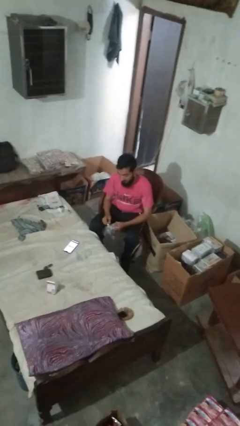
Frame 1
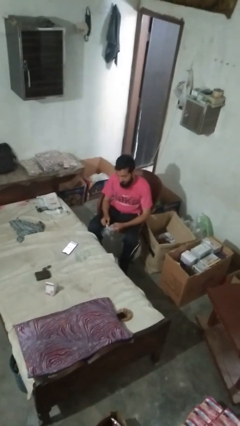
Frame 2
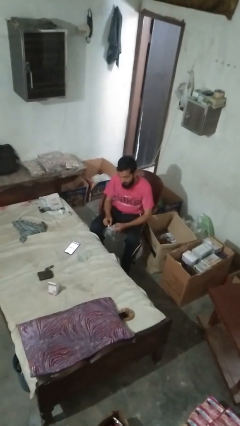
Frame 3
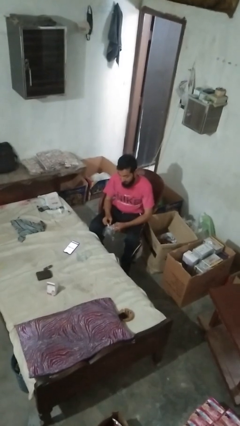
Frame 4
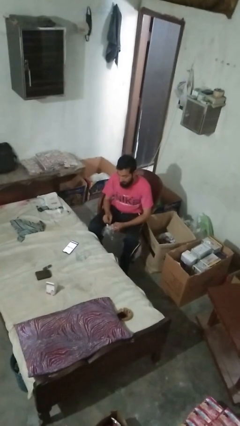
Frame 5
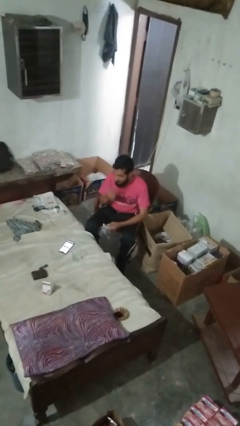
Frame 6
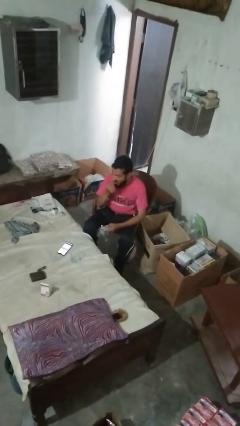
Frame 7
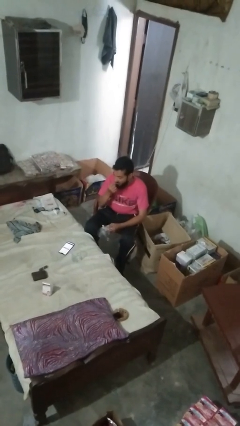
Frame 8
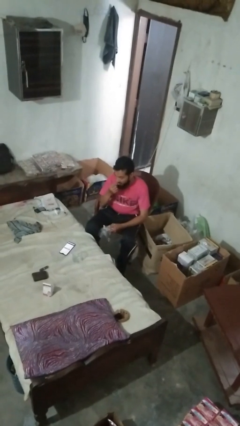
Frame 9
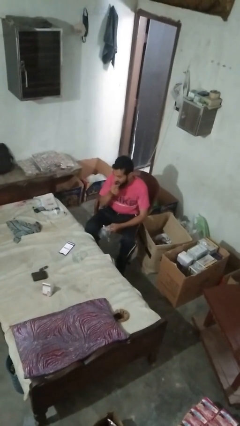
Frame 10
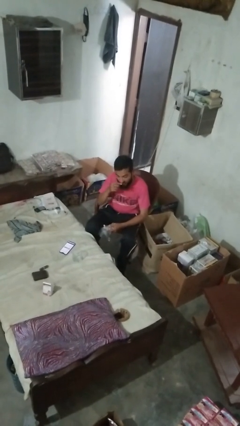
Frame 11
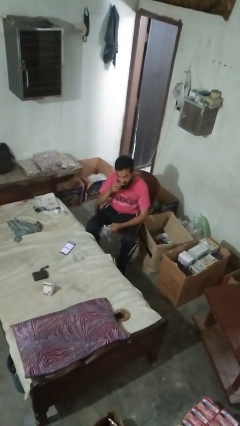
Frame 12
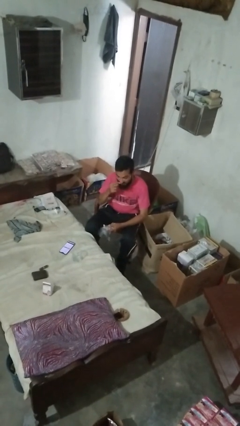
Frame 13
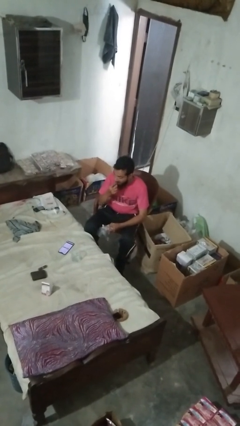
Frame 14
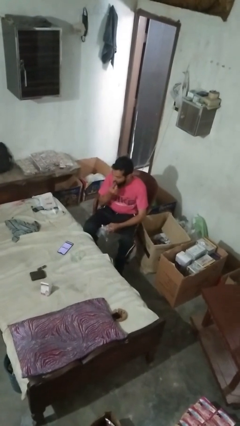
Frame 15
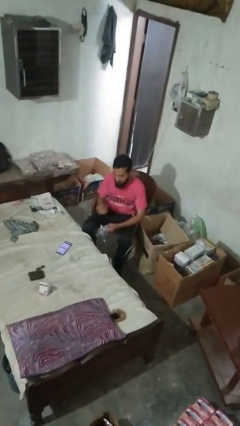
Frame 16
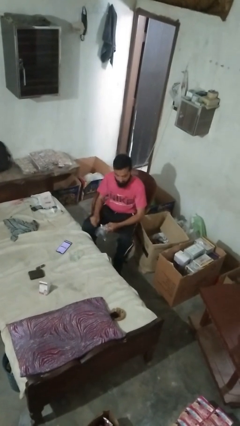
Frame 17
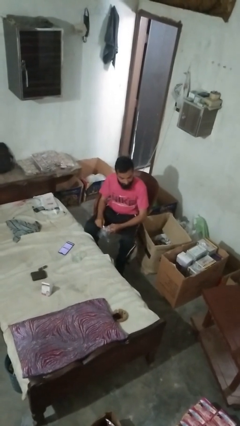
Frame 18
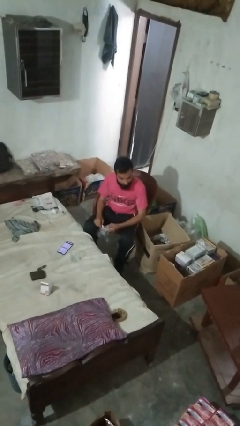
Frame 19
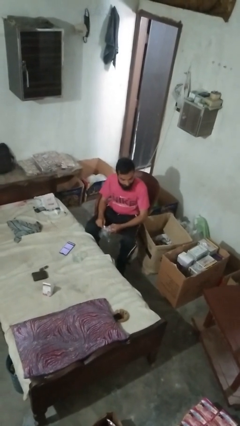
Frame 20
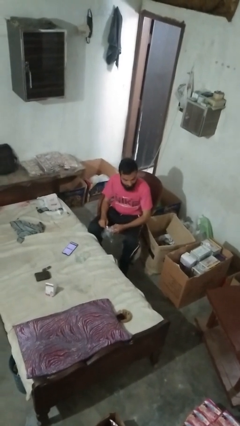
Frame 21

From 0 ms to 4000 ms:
person licks fingers

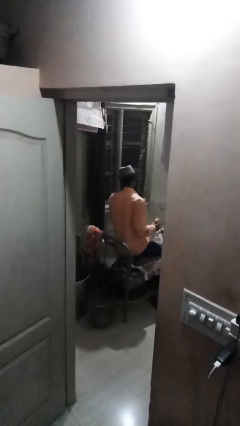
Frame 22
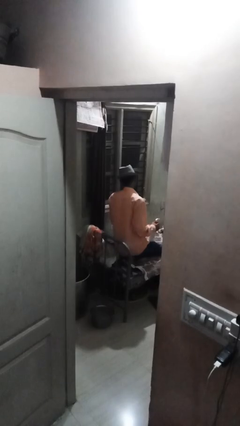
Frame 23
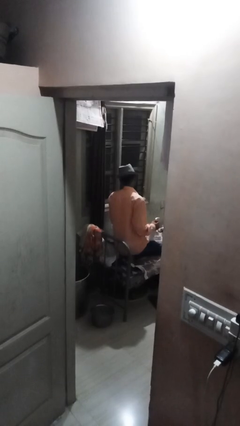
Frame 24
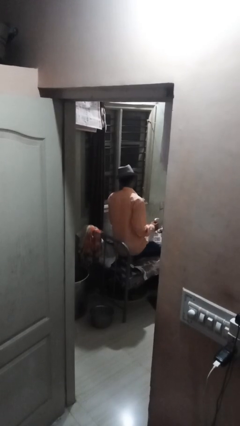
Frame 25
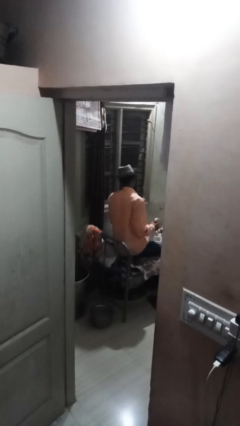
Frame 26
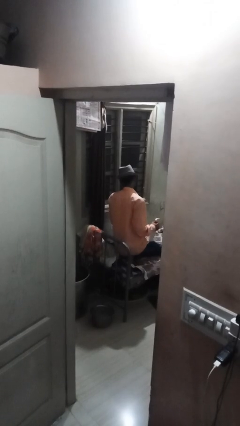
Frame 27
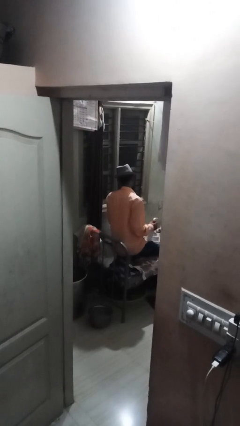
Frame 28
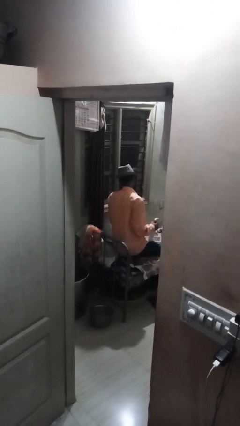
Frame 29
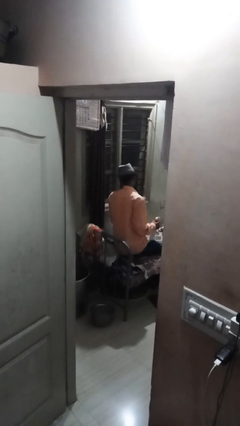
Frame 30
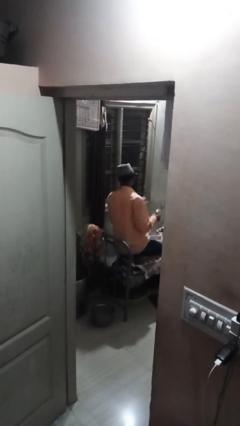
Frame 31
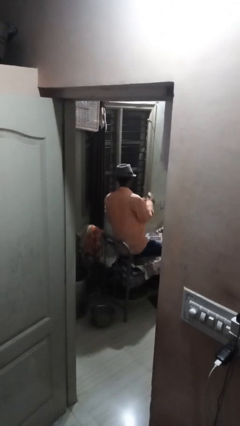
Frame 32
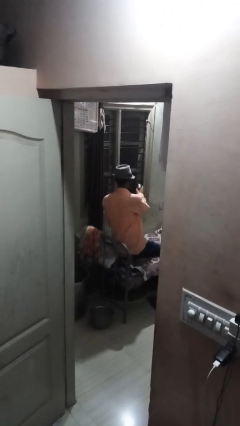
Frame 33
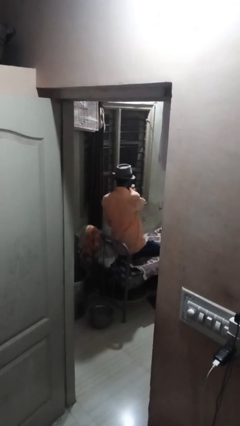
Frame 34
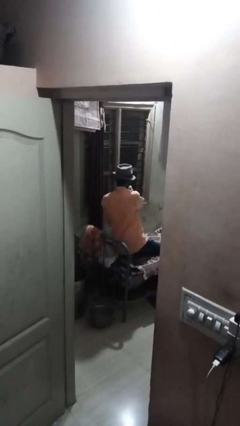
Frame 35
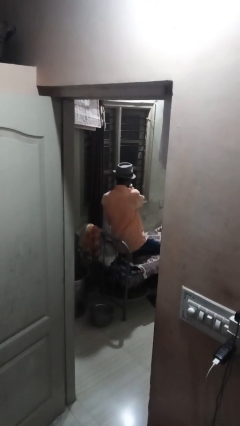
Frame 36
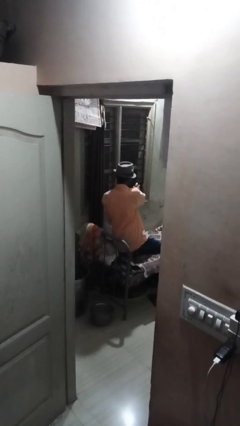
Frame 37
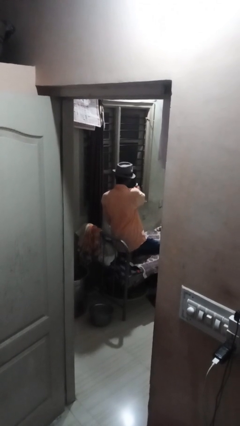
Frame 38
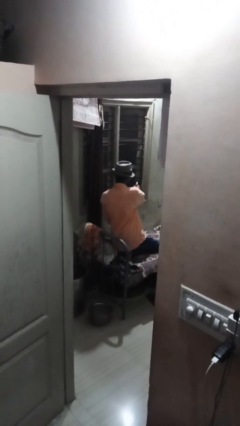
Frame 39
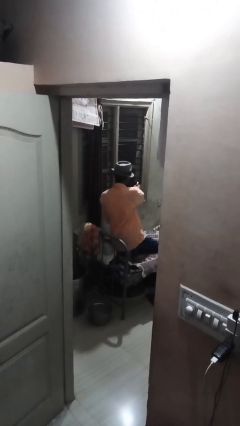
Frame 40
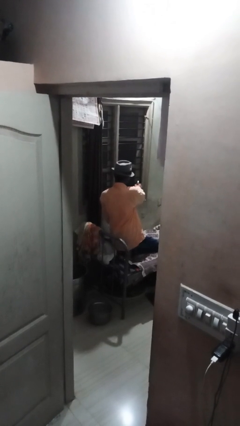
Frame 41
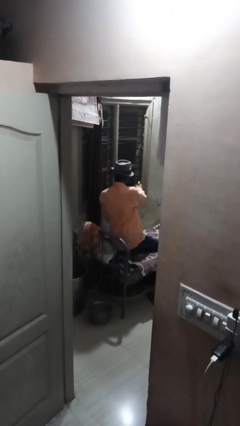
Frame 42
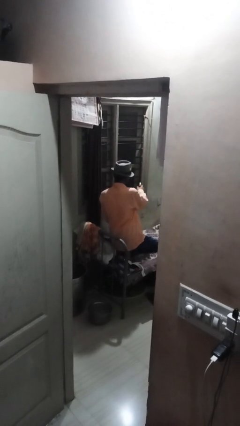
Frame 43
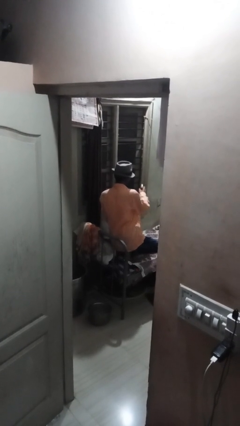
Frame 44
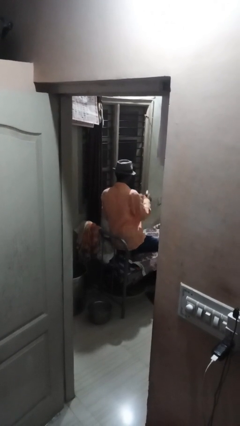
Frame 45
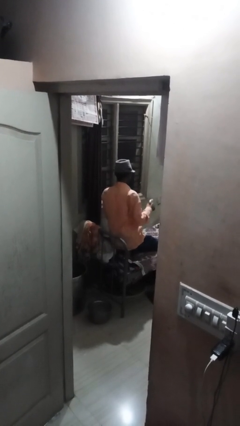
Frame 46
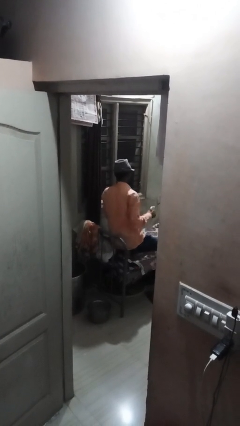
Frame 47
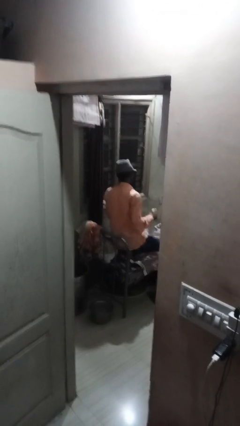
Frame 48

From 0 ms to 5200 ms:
person sprays from bottle

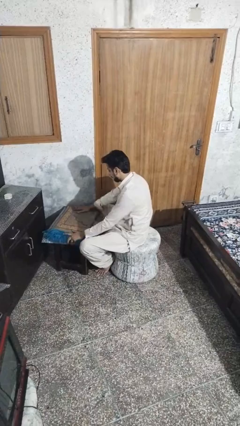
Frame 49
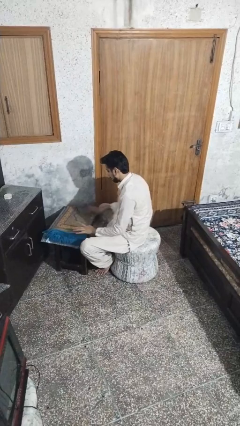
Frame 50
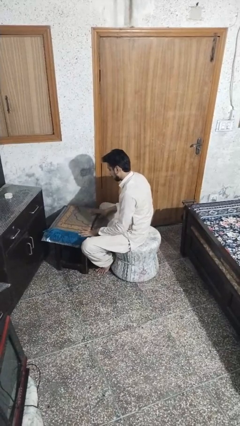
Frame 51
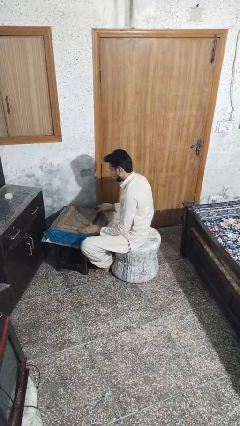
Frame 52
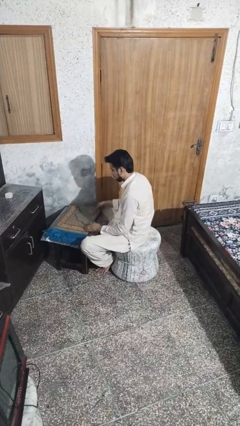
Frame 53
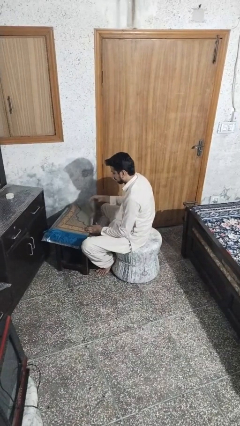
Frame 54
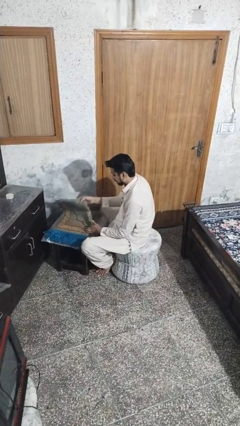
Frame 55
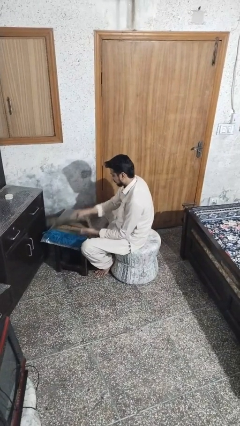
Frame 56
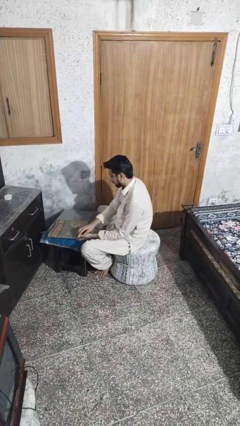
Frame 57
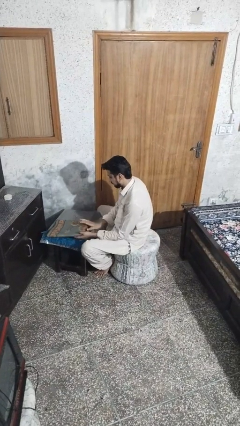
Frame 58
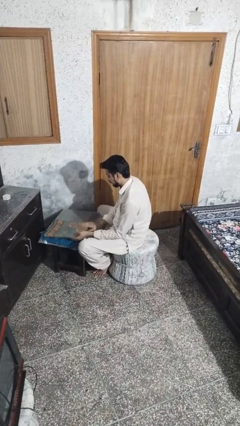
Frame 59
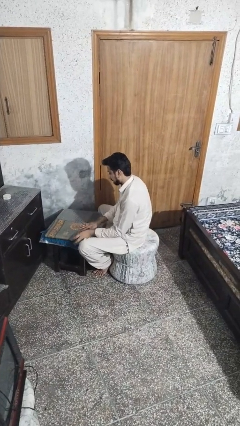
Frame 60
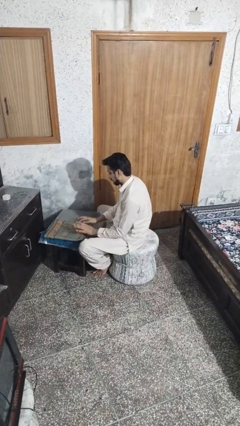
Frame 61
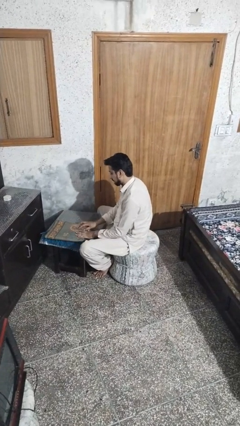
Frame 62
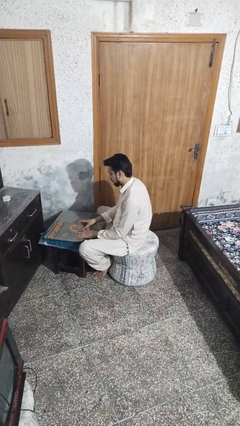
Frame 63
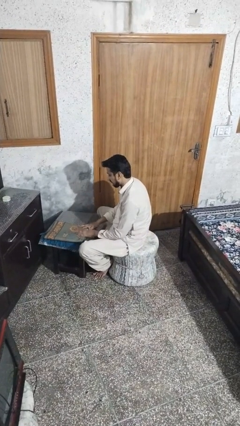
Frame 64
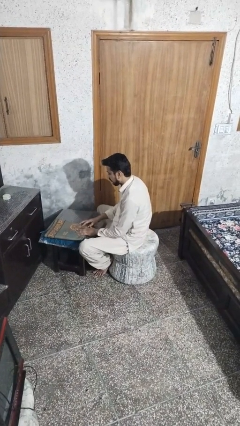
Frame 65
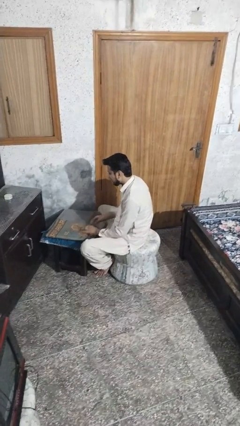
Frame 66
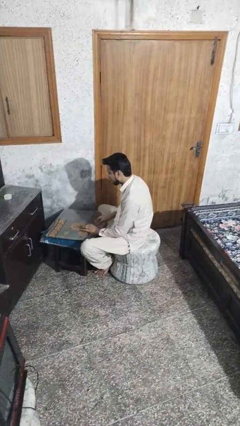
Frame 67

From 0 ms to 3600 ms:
person folds tablecloth

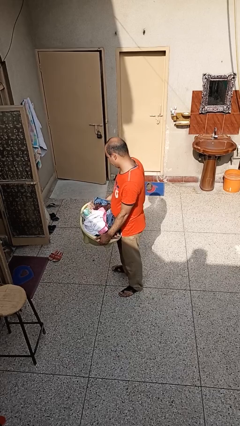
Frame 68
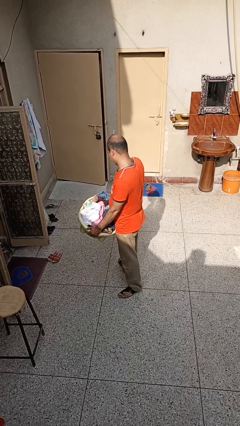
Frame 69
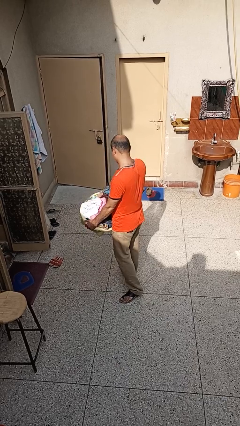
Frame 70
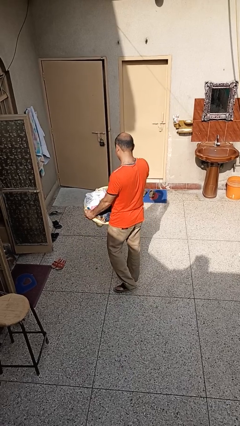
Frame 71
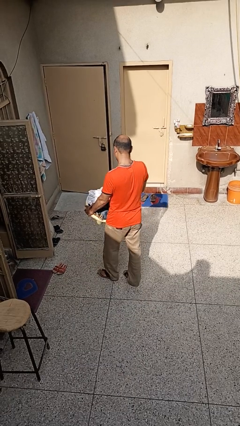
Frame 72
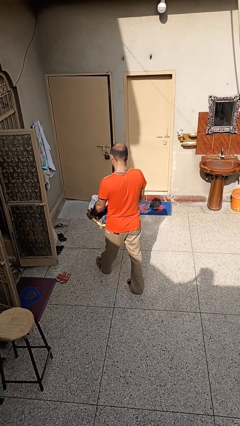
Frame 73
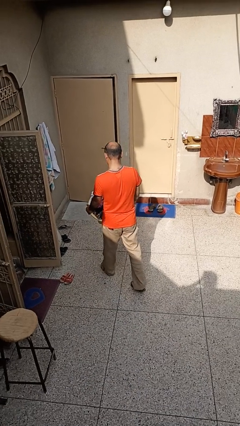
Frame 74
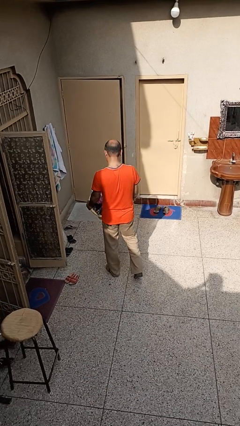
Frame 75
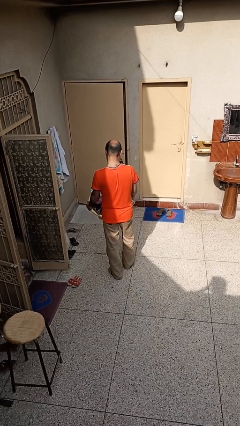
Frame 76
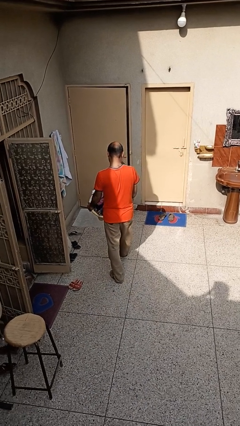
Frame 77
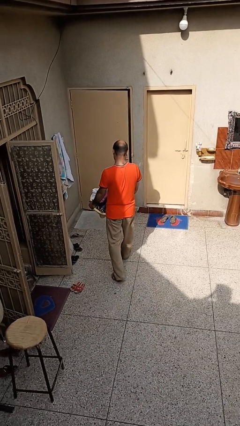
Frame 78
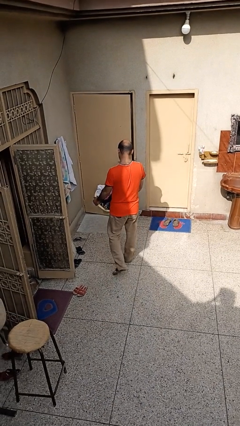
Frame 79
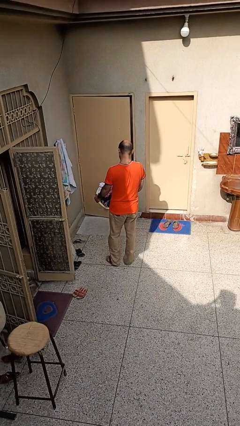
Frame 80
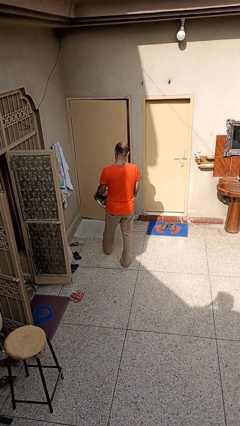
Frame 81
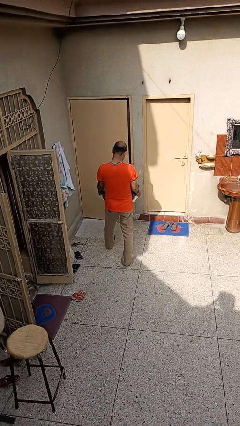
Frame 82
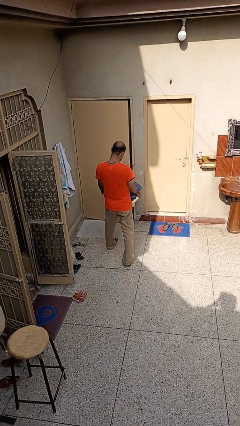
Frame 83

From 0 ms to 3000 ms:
person carries laundry basket

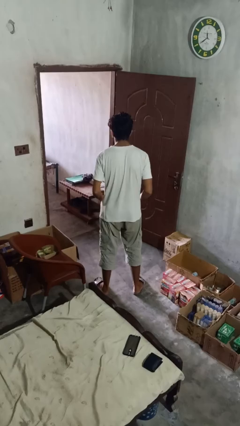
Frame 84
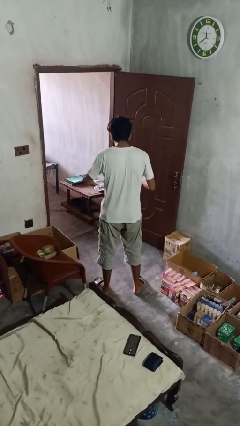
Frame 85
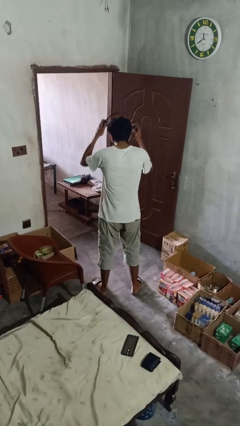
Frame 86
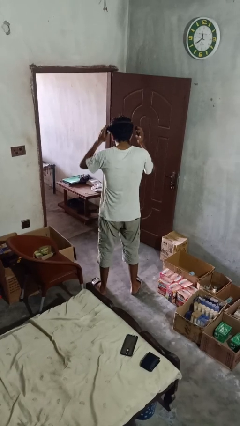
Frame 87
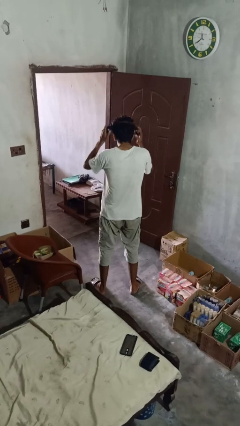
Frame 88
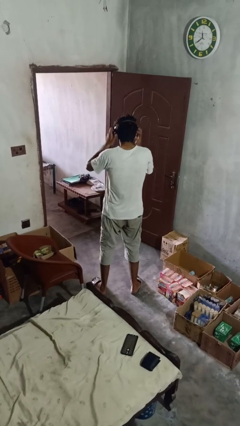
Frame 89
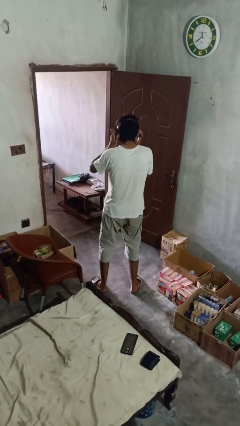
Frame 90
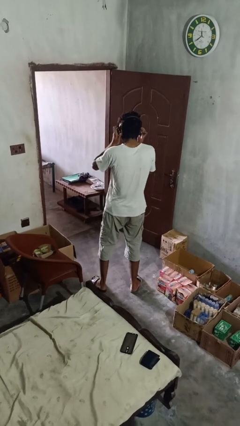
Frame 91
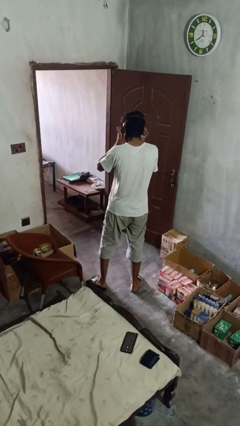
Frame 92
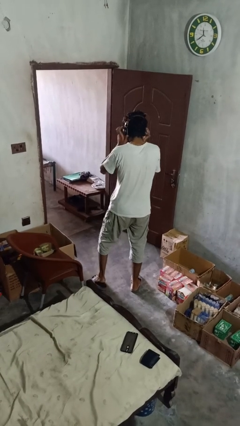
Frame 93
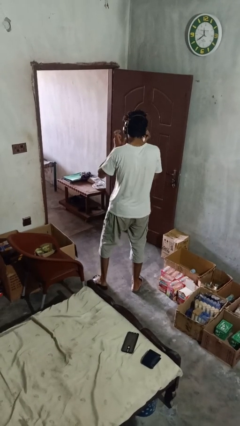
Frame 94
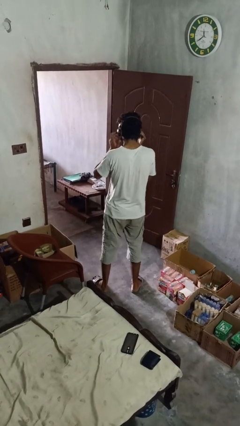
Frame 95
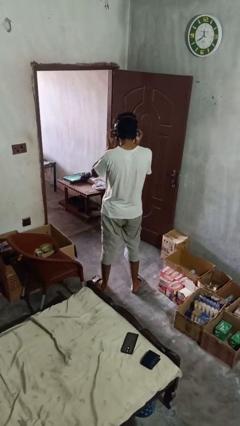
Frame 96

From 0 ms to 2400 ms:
person puts on headphones
